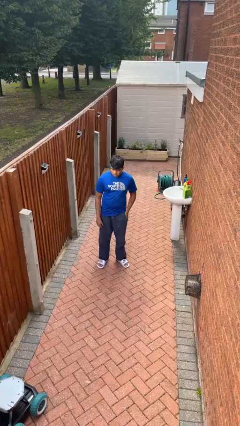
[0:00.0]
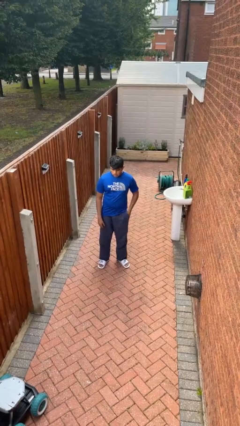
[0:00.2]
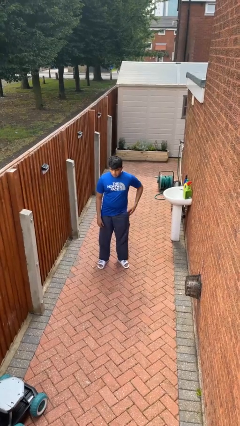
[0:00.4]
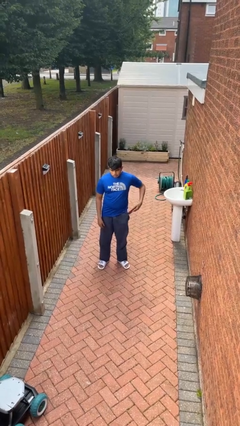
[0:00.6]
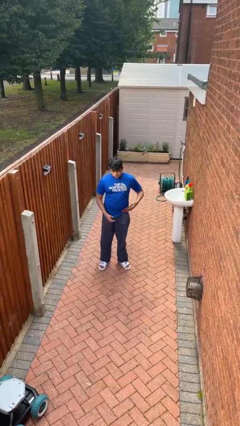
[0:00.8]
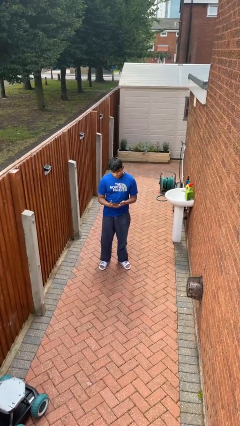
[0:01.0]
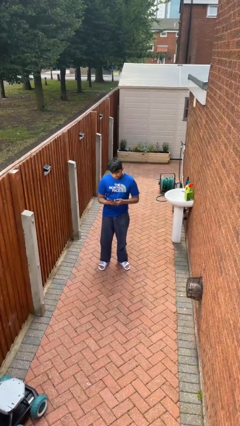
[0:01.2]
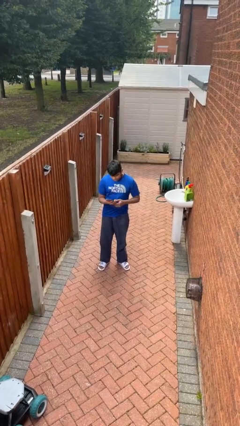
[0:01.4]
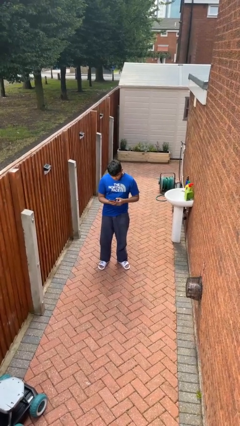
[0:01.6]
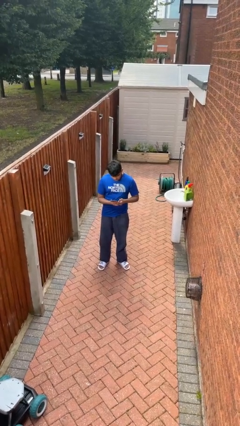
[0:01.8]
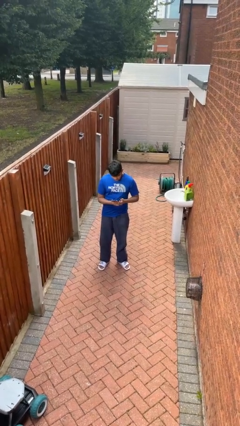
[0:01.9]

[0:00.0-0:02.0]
person takes phone from pocket

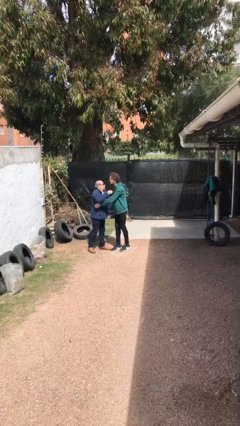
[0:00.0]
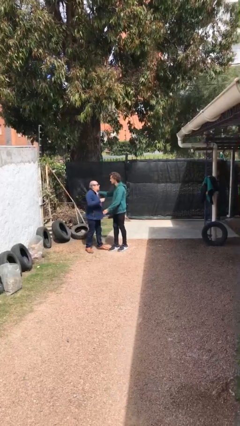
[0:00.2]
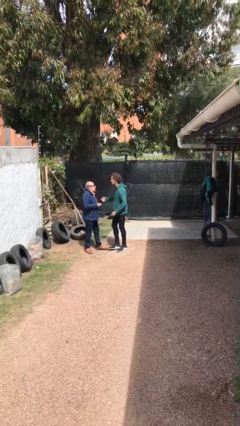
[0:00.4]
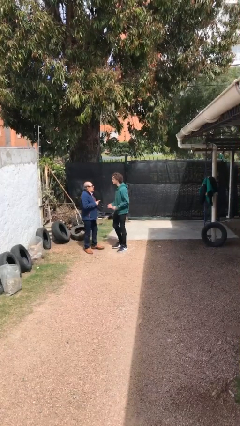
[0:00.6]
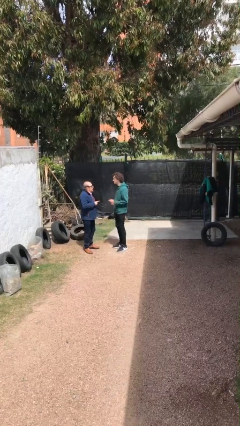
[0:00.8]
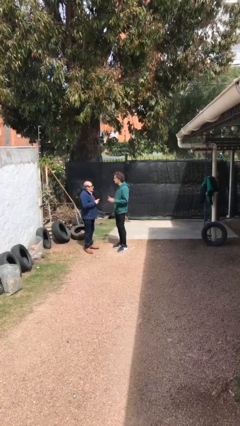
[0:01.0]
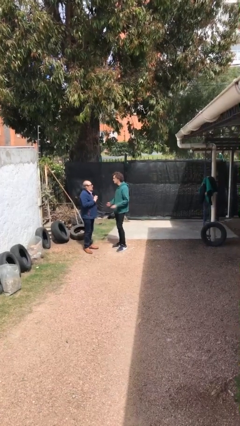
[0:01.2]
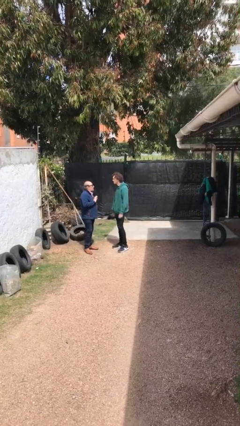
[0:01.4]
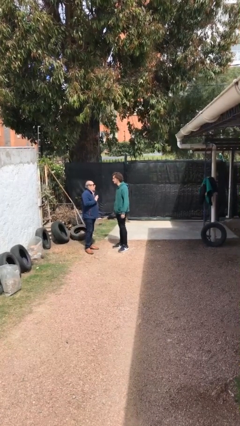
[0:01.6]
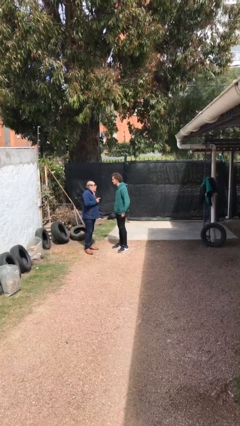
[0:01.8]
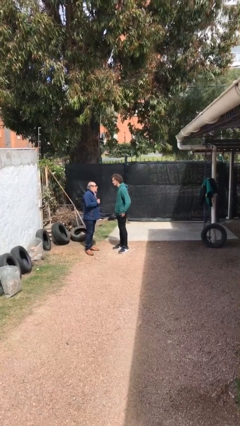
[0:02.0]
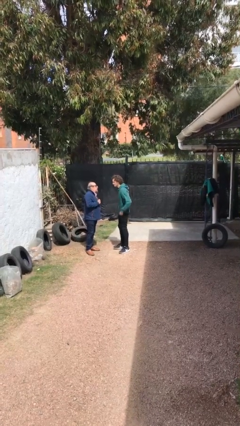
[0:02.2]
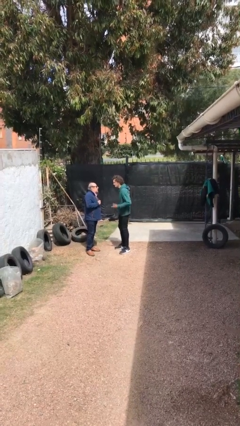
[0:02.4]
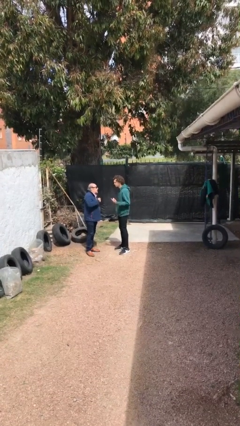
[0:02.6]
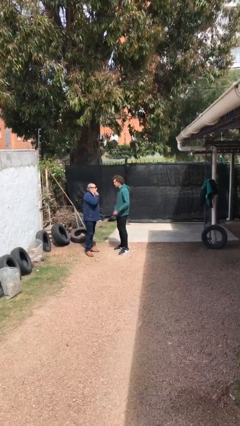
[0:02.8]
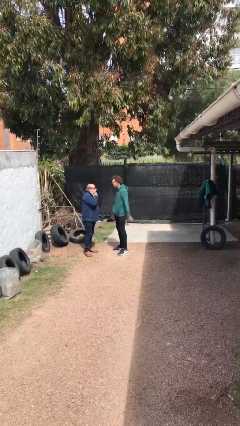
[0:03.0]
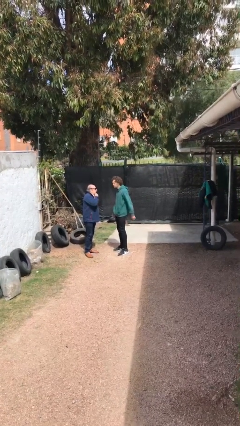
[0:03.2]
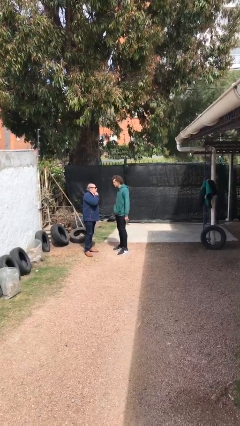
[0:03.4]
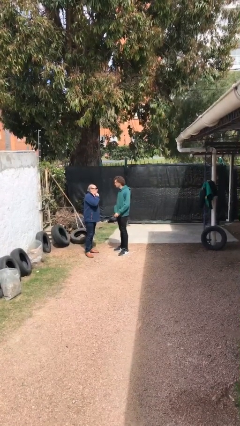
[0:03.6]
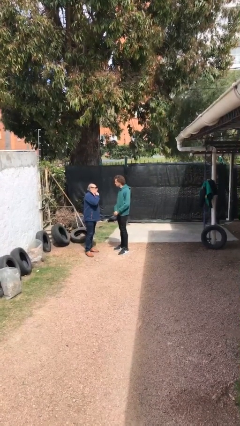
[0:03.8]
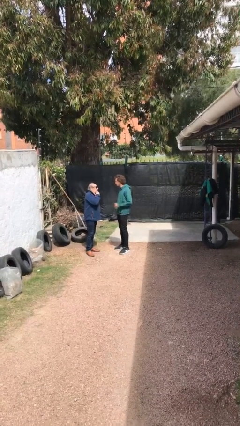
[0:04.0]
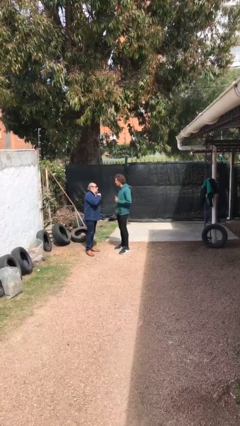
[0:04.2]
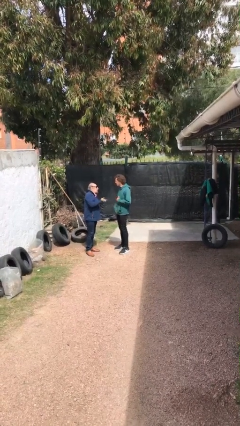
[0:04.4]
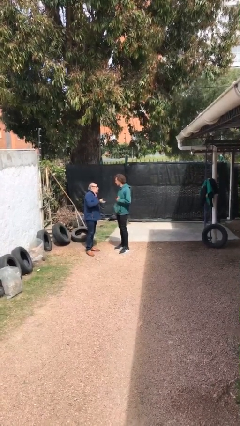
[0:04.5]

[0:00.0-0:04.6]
person talks to person

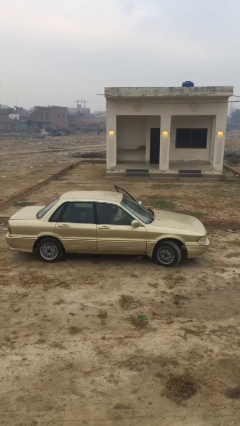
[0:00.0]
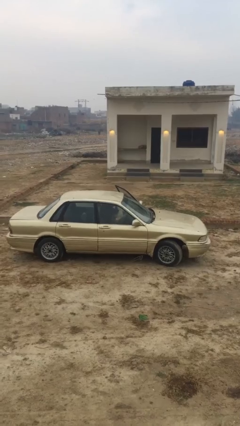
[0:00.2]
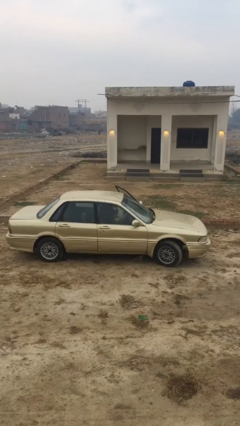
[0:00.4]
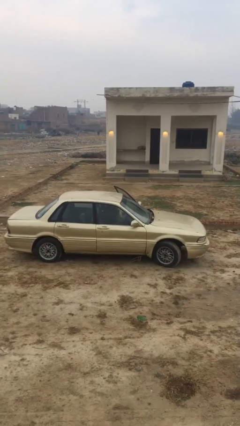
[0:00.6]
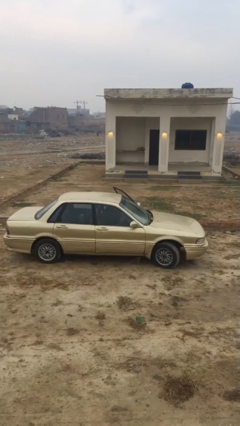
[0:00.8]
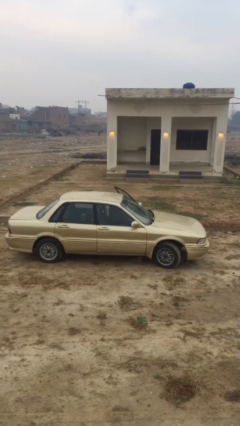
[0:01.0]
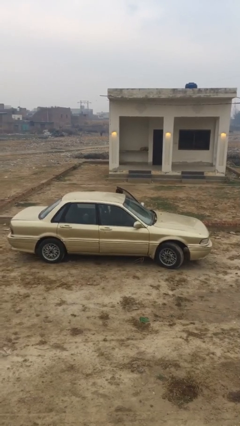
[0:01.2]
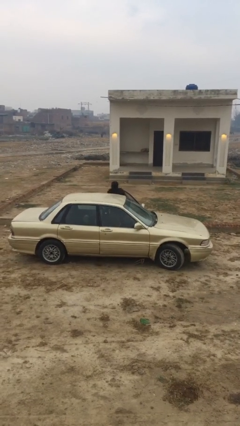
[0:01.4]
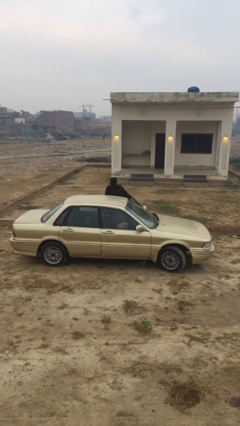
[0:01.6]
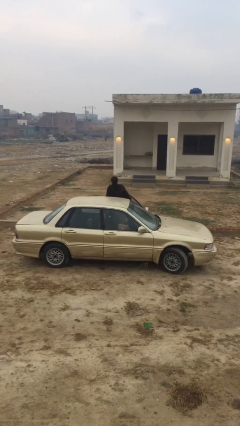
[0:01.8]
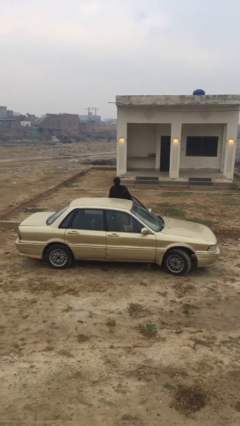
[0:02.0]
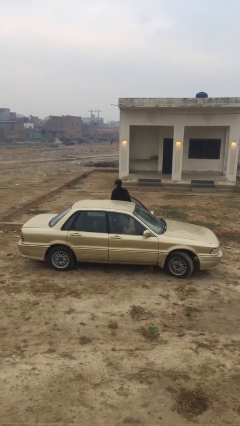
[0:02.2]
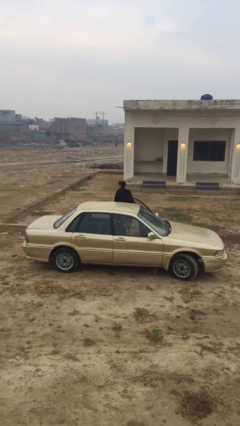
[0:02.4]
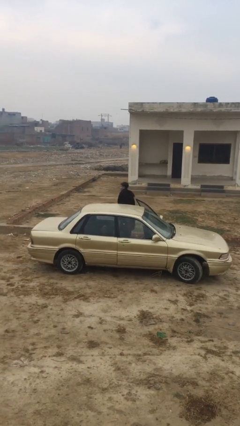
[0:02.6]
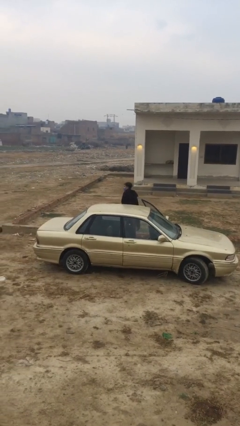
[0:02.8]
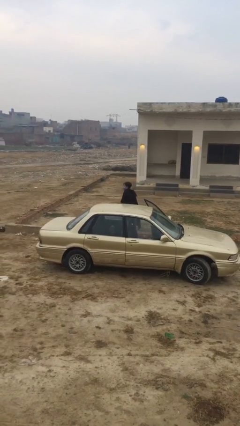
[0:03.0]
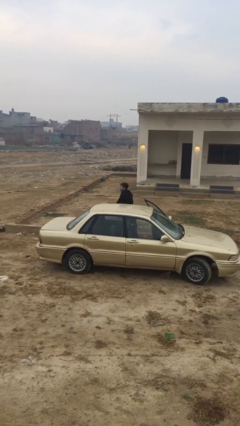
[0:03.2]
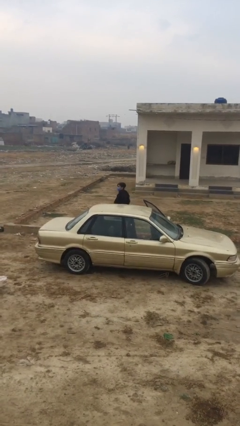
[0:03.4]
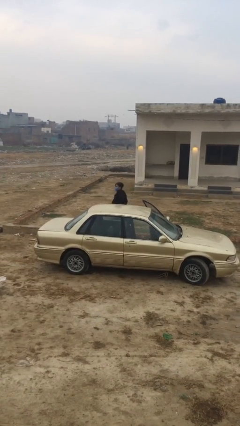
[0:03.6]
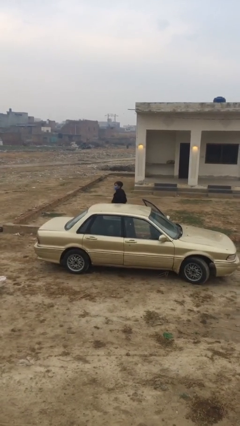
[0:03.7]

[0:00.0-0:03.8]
person exits car

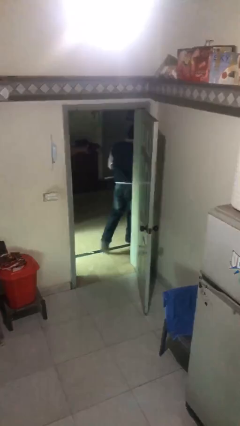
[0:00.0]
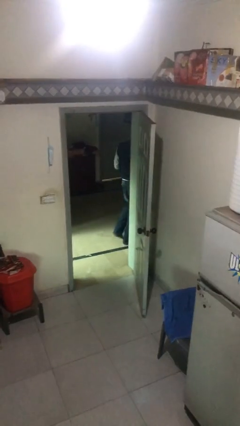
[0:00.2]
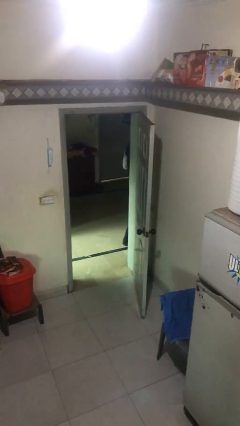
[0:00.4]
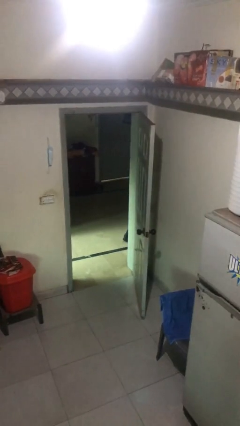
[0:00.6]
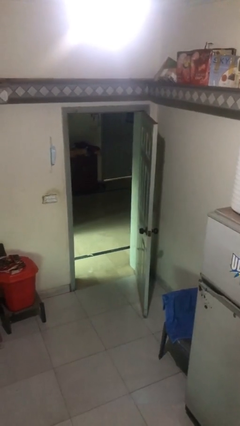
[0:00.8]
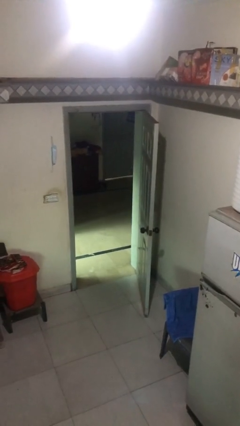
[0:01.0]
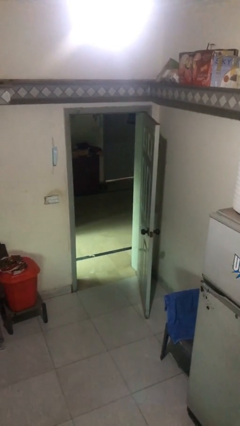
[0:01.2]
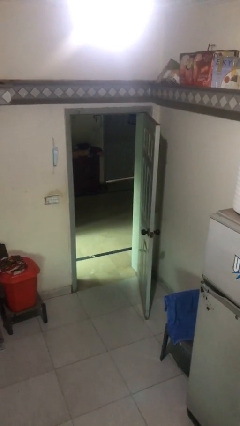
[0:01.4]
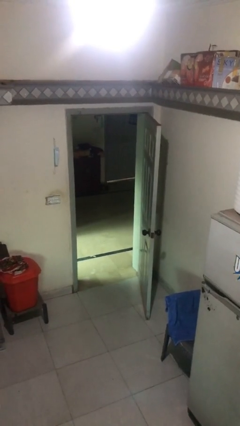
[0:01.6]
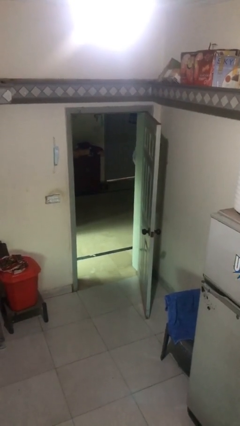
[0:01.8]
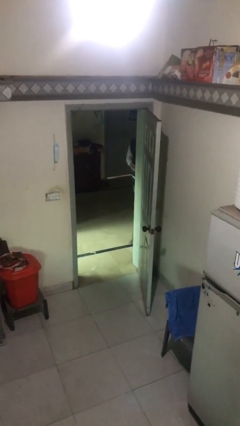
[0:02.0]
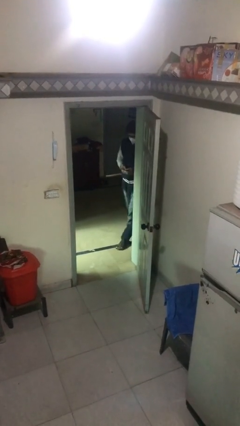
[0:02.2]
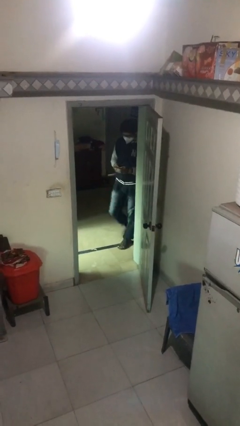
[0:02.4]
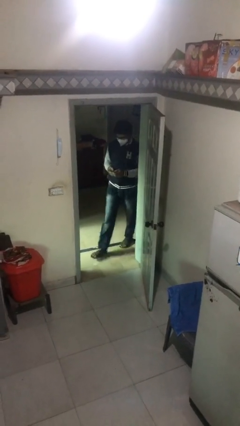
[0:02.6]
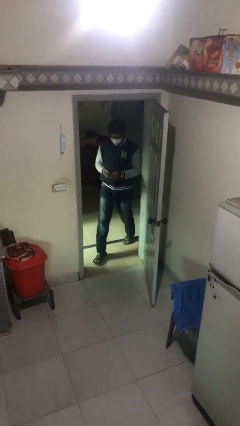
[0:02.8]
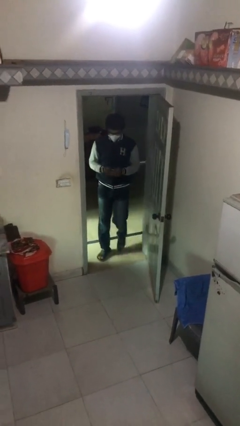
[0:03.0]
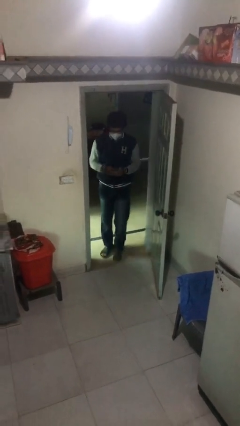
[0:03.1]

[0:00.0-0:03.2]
person enters scene through structure

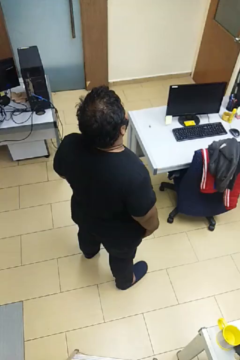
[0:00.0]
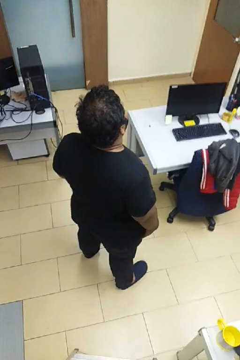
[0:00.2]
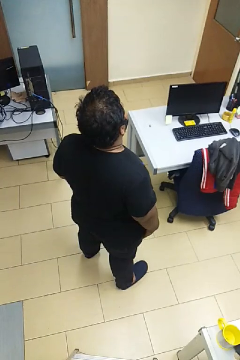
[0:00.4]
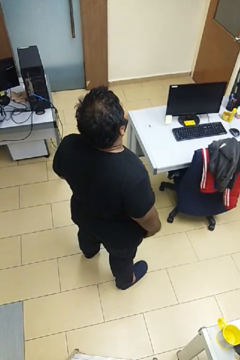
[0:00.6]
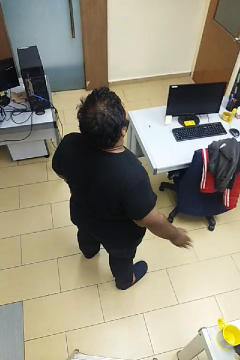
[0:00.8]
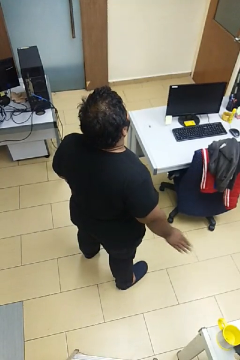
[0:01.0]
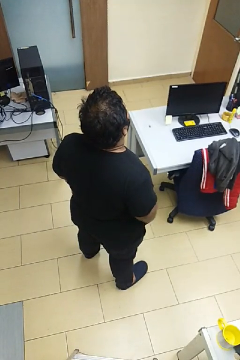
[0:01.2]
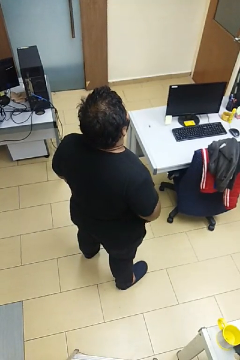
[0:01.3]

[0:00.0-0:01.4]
person slaps hands on thighs

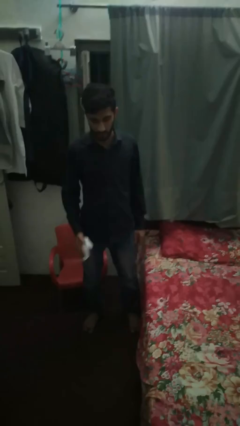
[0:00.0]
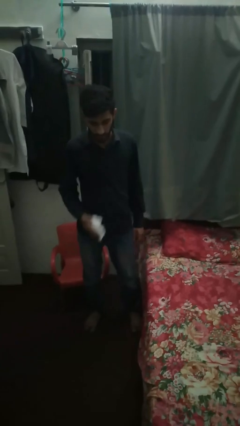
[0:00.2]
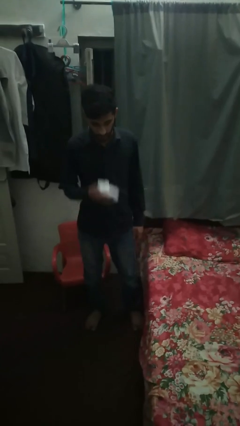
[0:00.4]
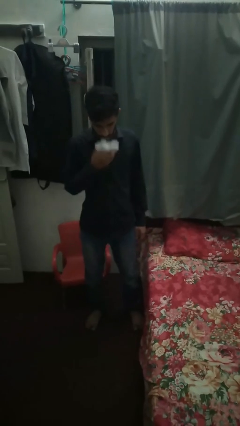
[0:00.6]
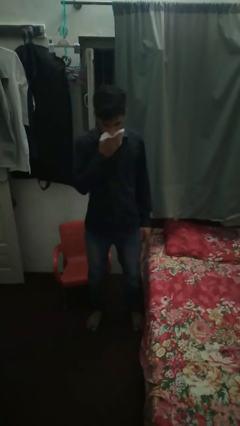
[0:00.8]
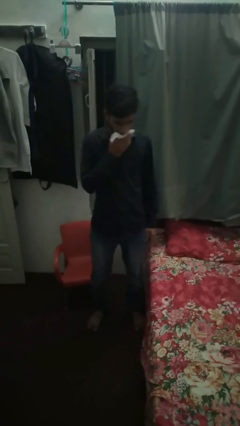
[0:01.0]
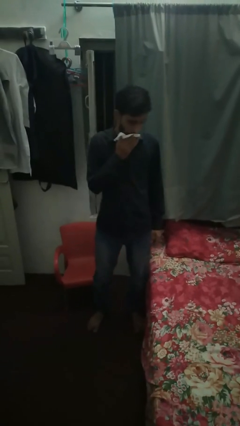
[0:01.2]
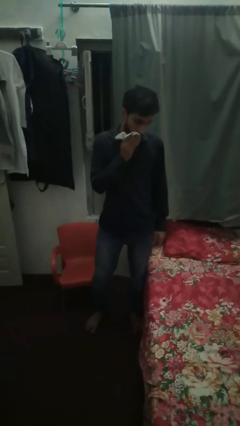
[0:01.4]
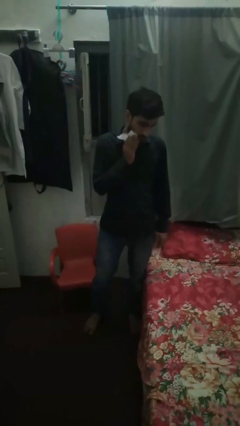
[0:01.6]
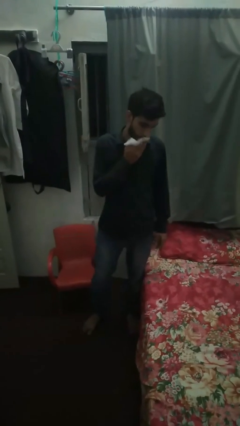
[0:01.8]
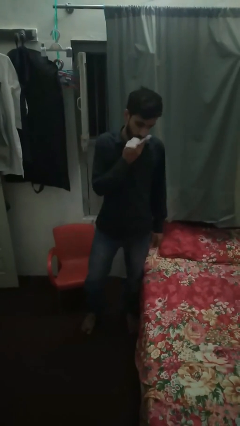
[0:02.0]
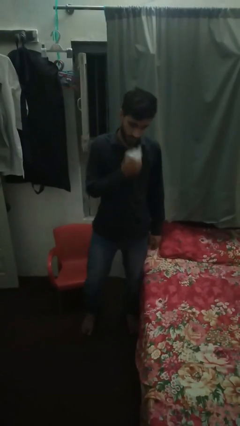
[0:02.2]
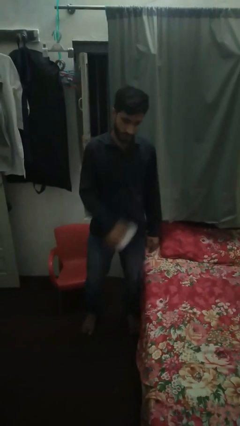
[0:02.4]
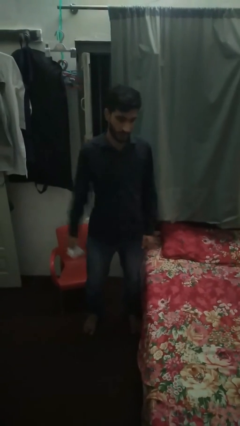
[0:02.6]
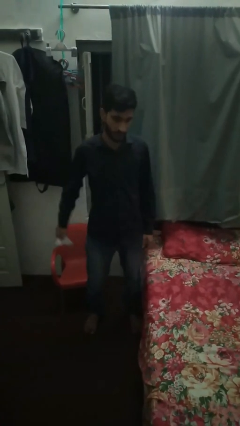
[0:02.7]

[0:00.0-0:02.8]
person wipes mouth with napkin
